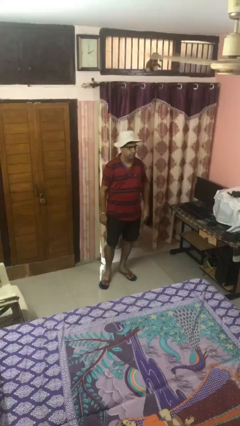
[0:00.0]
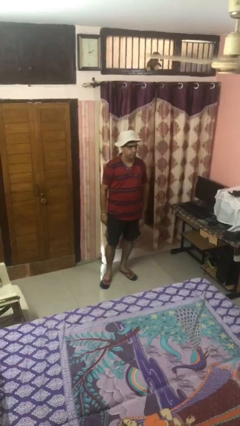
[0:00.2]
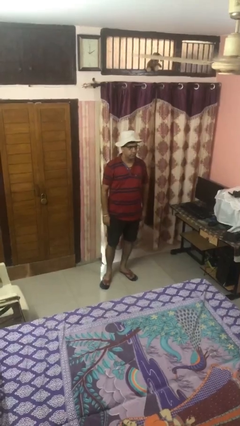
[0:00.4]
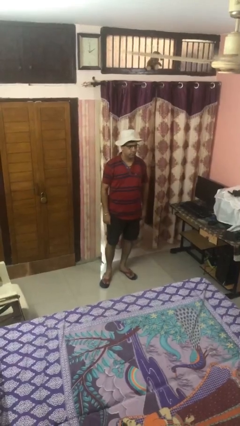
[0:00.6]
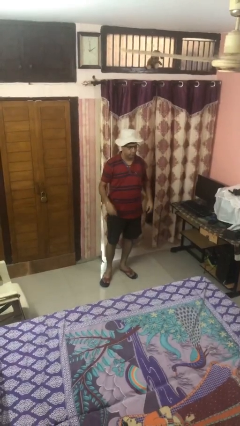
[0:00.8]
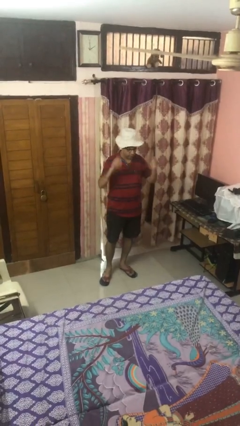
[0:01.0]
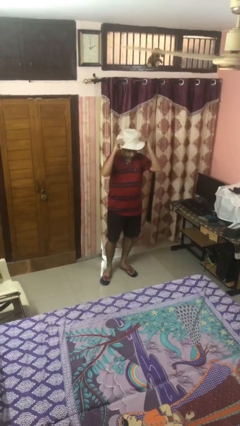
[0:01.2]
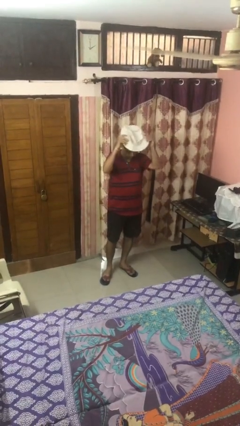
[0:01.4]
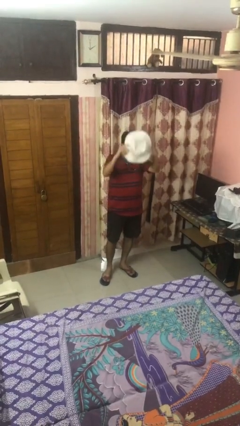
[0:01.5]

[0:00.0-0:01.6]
person takes off hat

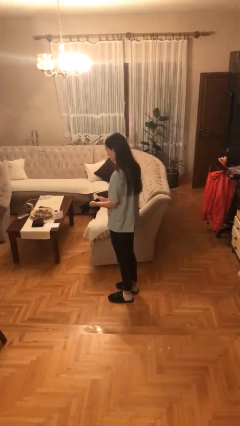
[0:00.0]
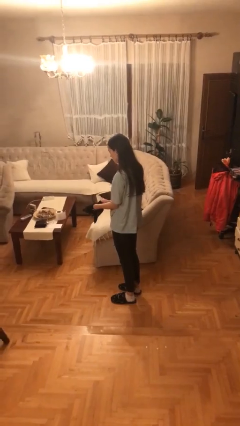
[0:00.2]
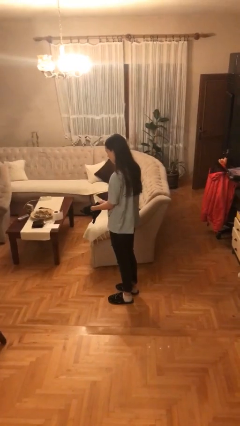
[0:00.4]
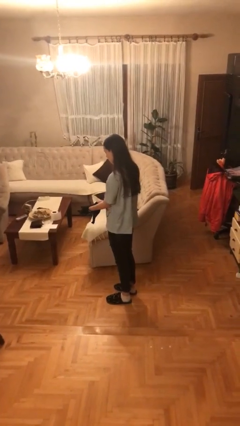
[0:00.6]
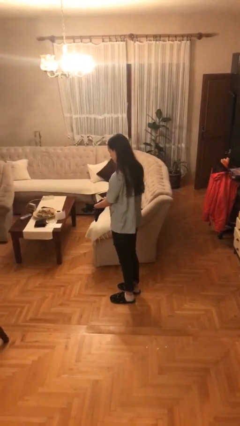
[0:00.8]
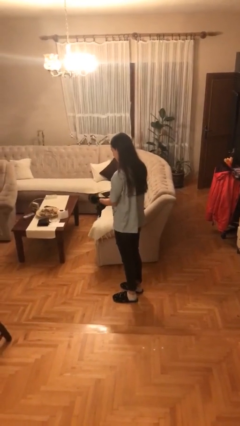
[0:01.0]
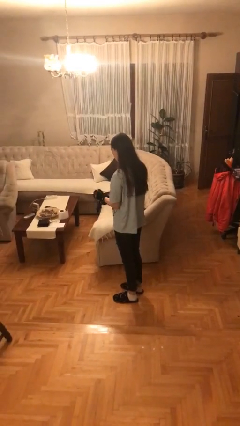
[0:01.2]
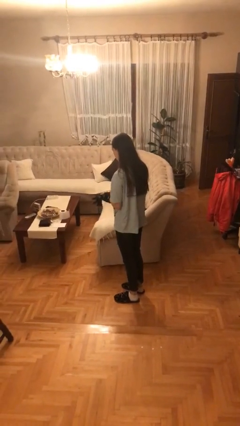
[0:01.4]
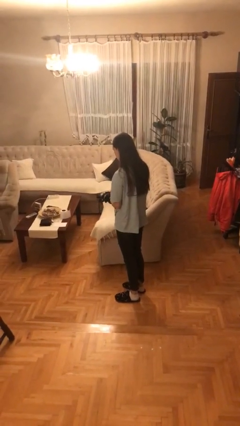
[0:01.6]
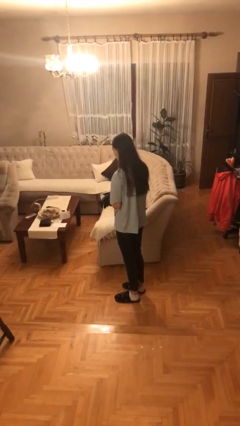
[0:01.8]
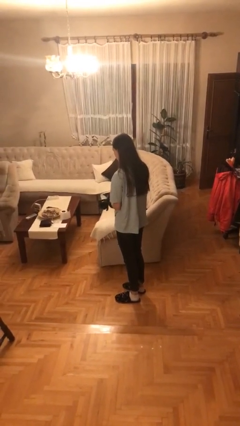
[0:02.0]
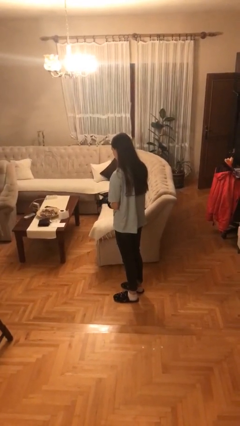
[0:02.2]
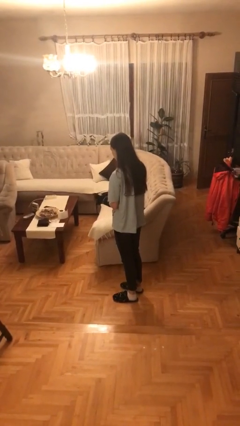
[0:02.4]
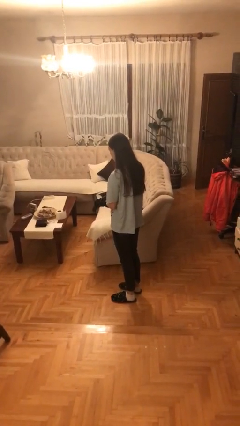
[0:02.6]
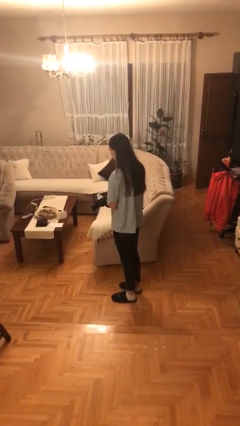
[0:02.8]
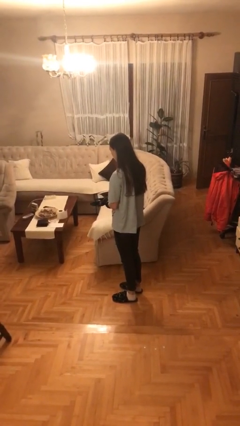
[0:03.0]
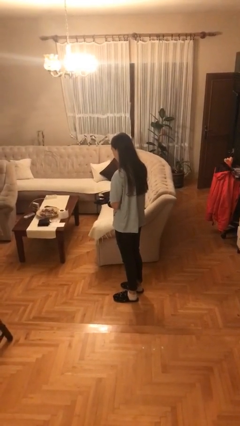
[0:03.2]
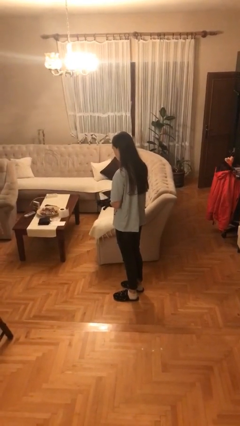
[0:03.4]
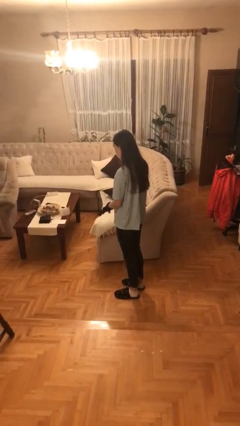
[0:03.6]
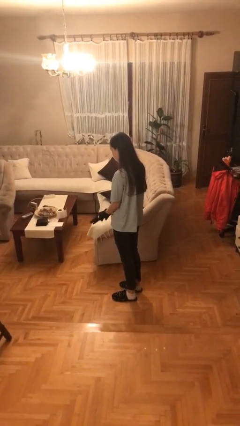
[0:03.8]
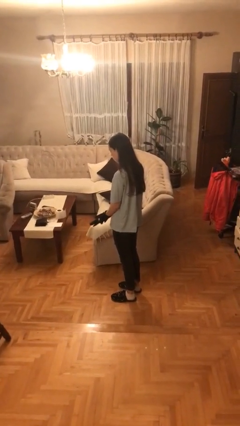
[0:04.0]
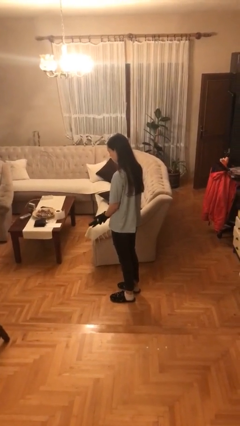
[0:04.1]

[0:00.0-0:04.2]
person puts on gloves

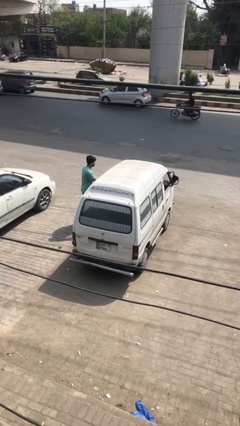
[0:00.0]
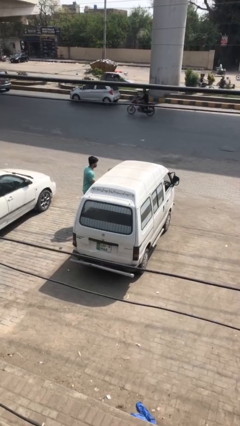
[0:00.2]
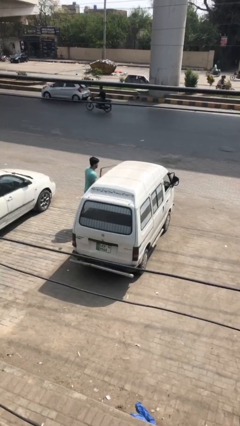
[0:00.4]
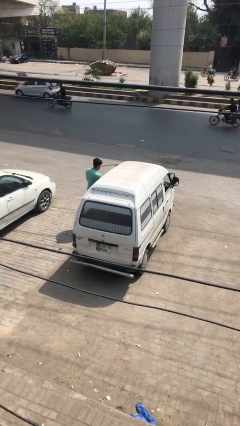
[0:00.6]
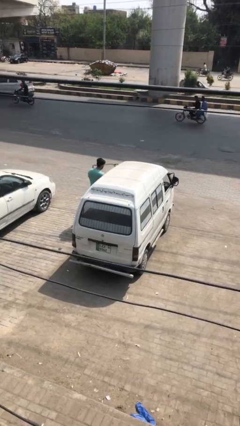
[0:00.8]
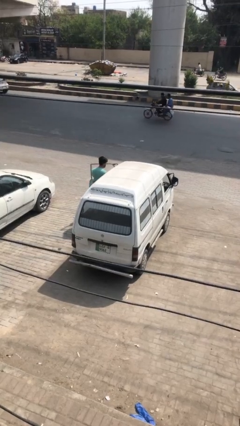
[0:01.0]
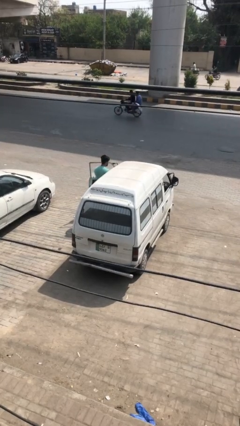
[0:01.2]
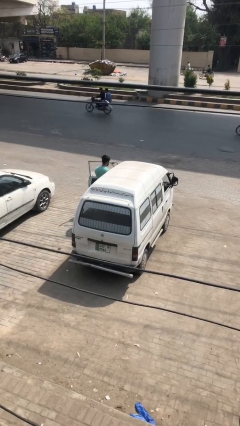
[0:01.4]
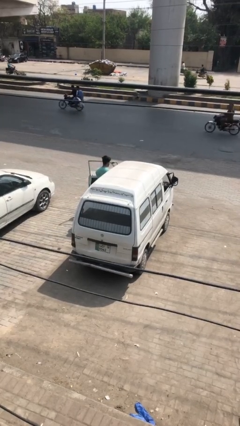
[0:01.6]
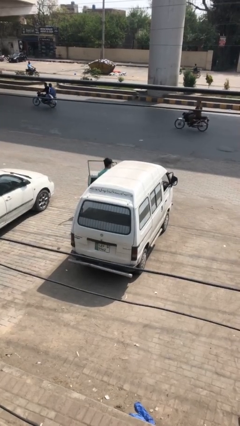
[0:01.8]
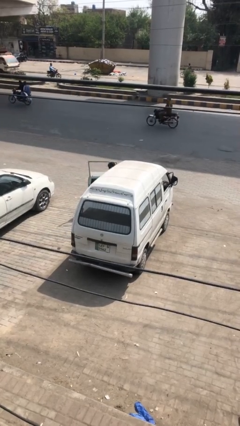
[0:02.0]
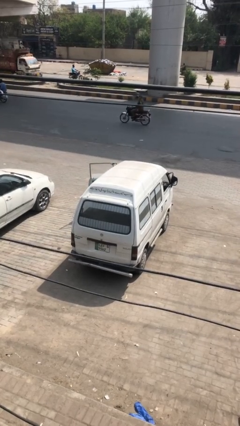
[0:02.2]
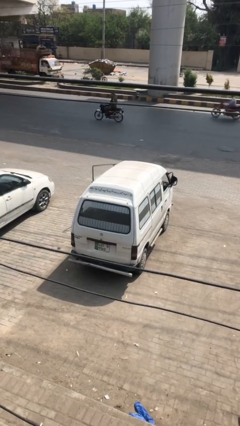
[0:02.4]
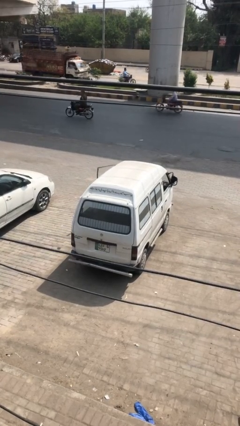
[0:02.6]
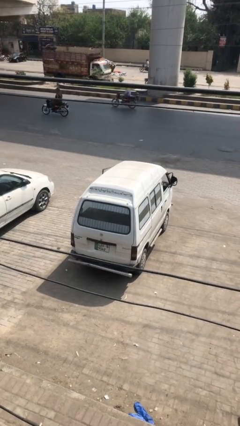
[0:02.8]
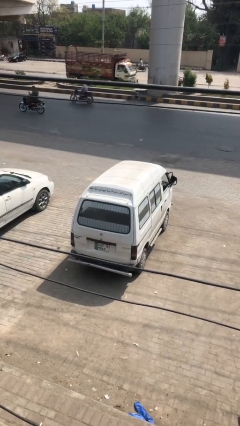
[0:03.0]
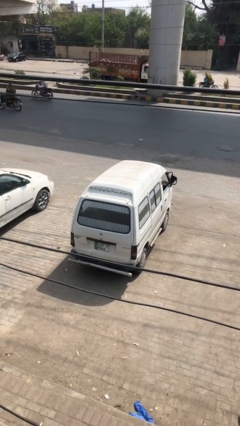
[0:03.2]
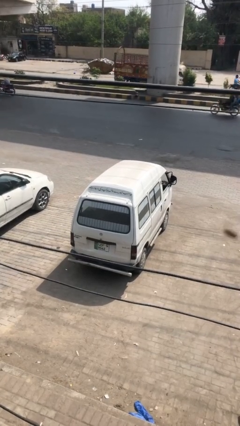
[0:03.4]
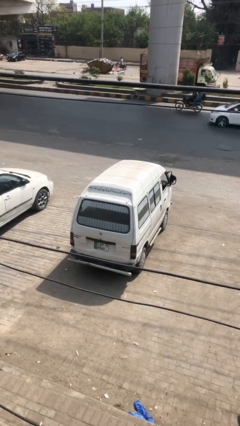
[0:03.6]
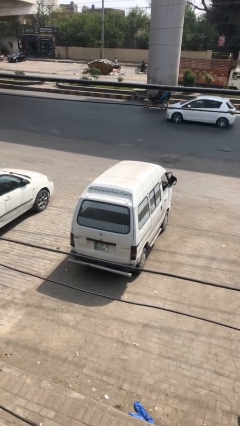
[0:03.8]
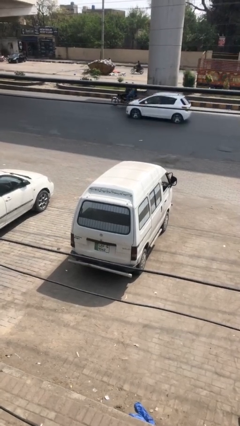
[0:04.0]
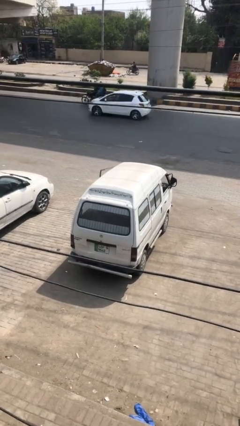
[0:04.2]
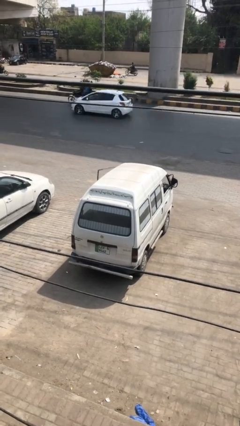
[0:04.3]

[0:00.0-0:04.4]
car picks up person

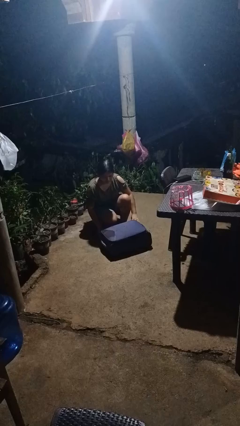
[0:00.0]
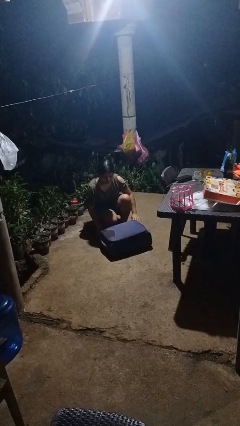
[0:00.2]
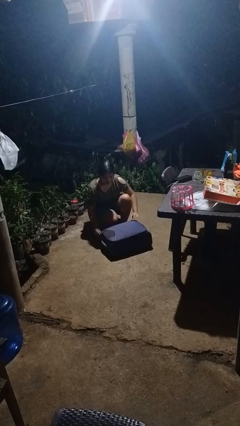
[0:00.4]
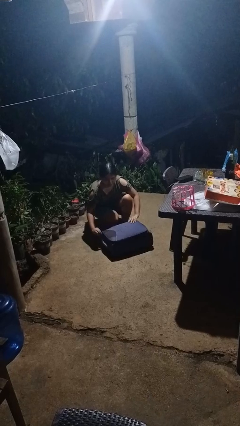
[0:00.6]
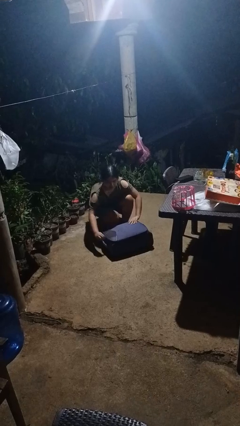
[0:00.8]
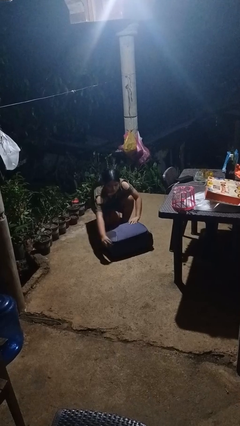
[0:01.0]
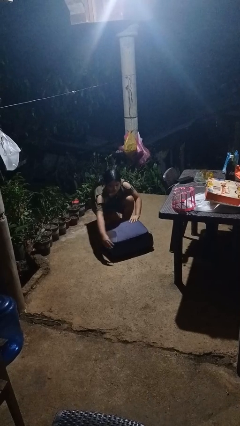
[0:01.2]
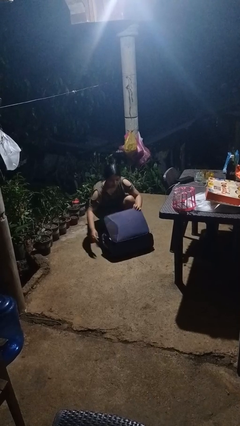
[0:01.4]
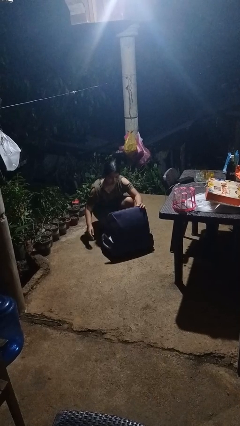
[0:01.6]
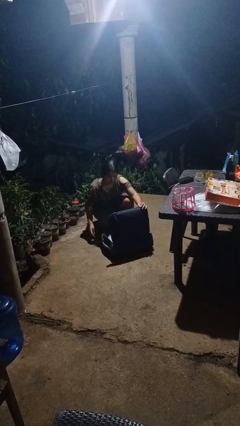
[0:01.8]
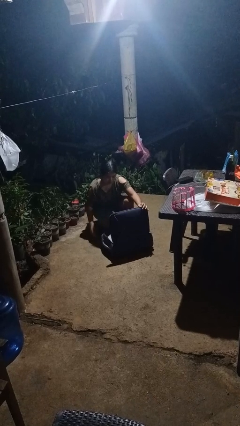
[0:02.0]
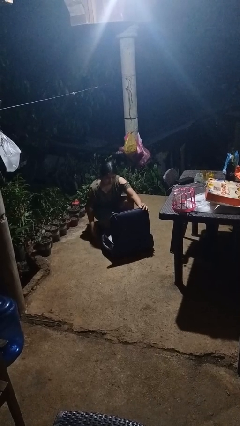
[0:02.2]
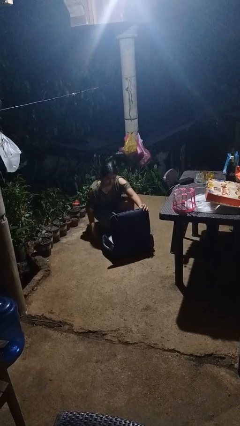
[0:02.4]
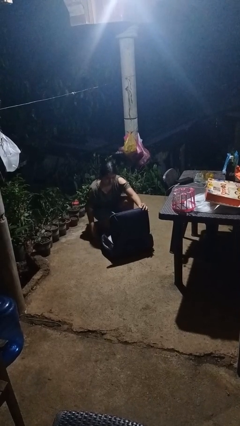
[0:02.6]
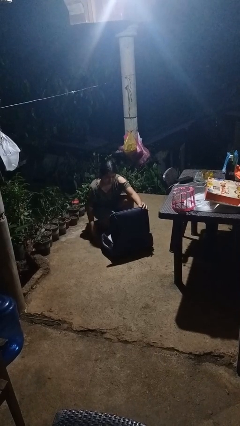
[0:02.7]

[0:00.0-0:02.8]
person opens suitcase

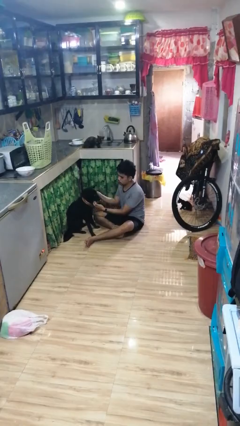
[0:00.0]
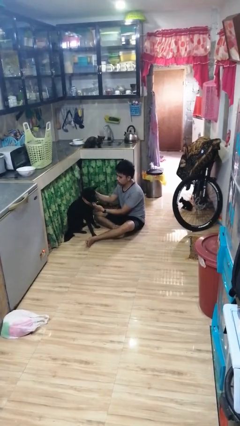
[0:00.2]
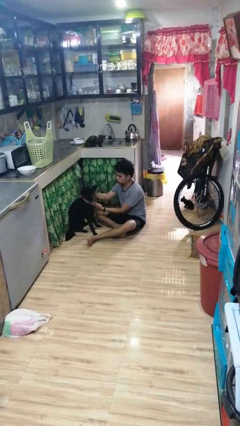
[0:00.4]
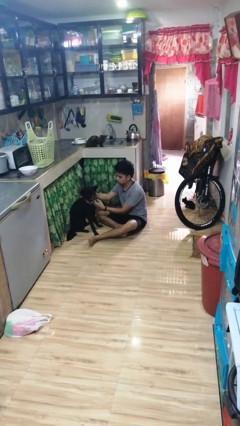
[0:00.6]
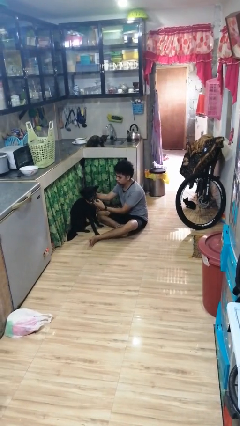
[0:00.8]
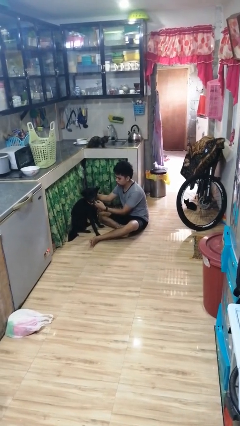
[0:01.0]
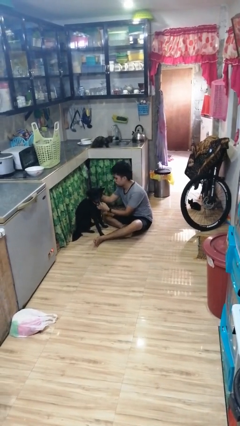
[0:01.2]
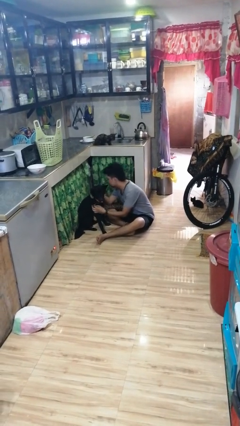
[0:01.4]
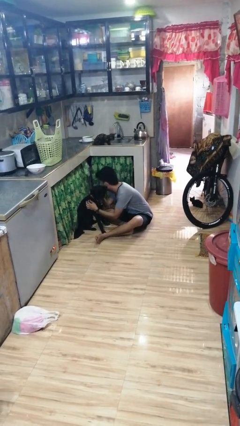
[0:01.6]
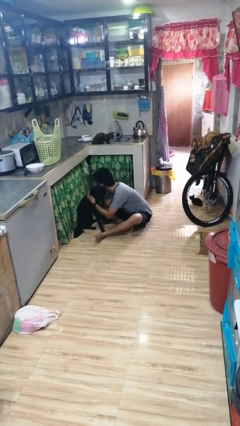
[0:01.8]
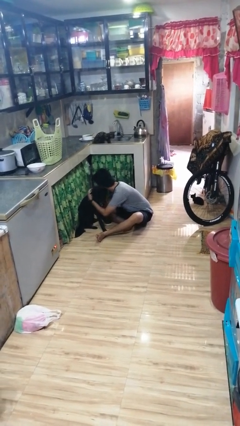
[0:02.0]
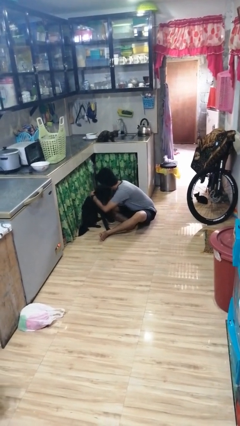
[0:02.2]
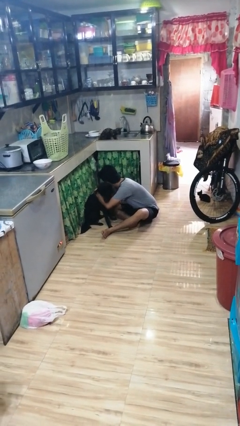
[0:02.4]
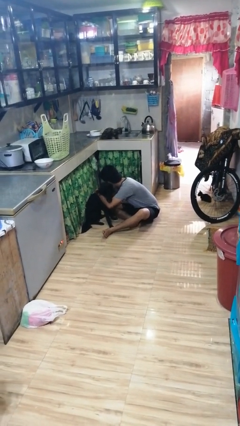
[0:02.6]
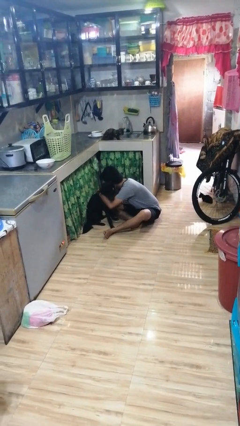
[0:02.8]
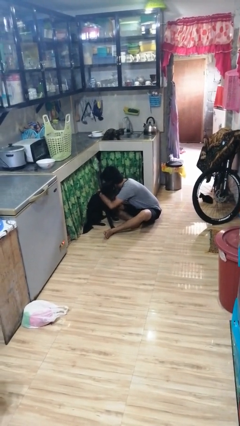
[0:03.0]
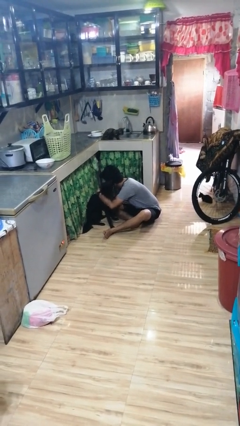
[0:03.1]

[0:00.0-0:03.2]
person hugs dog

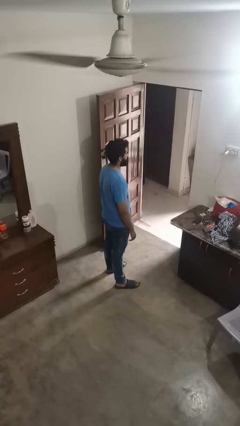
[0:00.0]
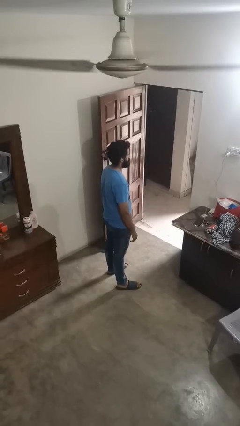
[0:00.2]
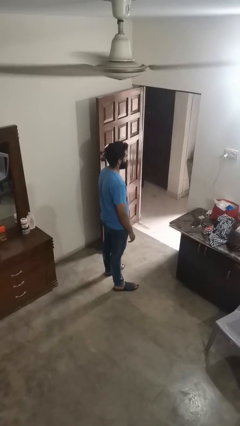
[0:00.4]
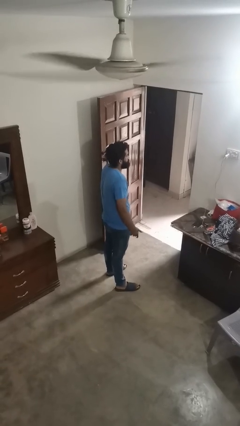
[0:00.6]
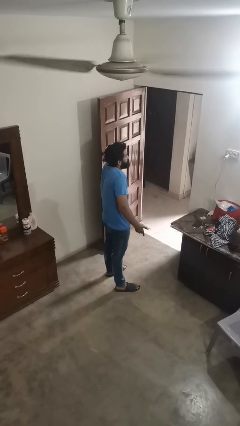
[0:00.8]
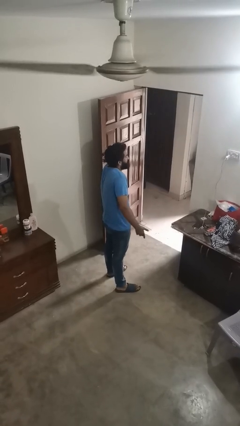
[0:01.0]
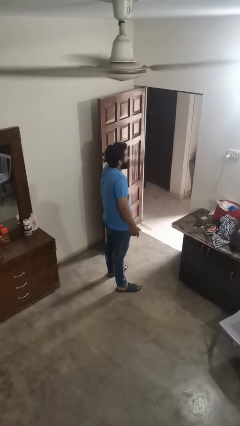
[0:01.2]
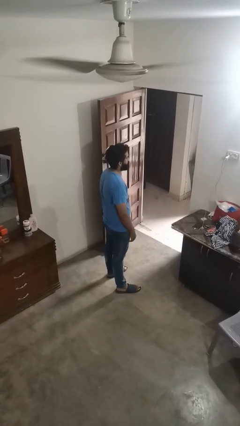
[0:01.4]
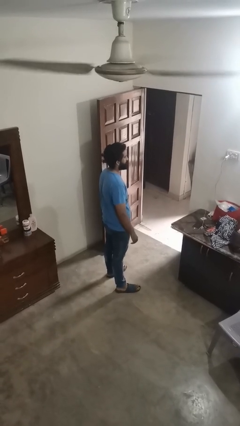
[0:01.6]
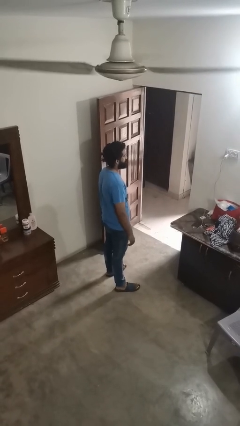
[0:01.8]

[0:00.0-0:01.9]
person shrugs
